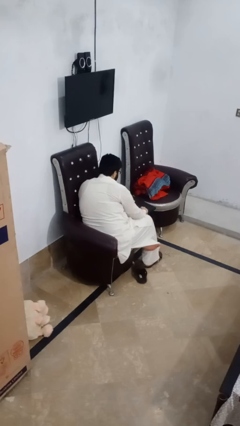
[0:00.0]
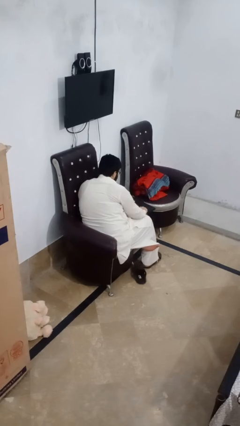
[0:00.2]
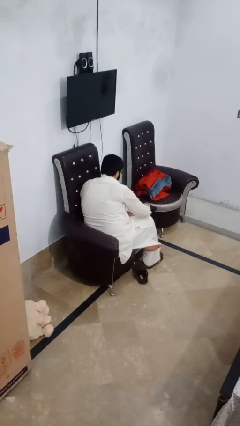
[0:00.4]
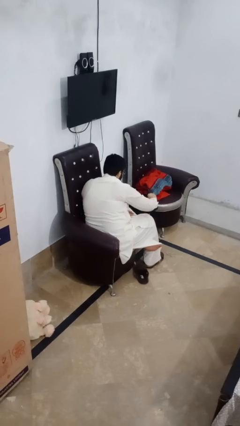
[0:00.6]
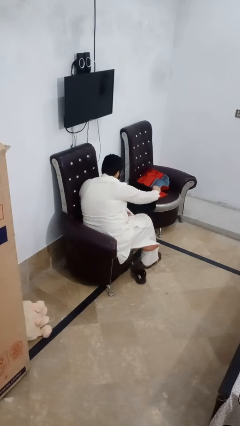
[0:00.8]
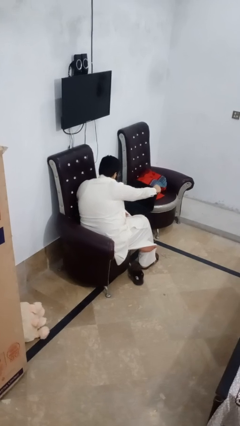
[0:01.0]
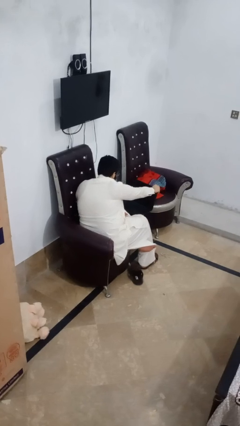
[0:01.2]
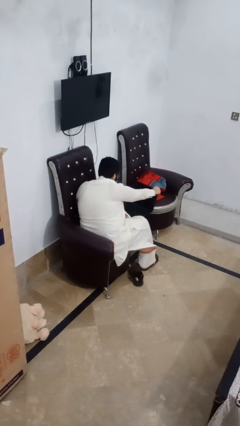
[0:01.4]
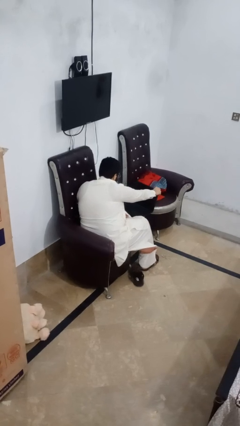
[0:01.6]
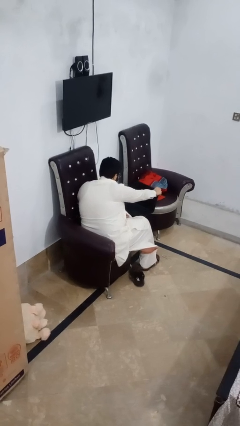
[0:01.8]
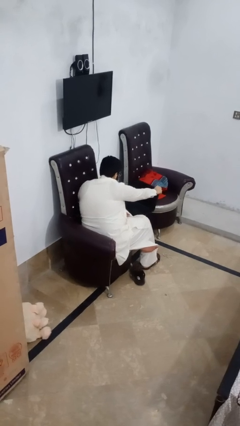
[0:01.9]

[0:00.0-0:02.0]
person opens laptop

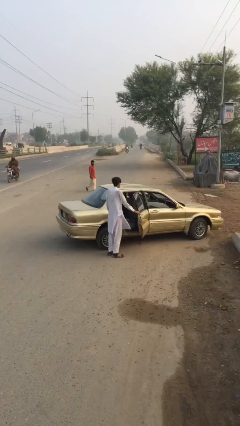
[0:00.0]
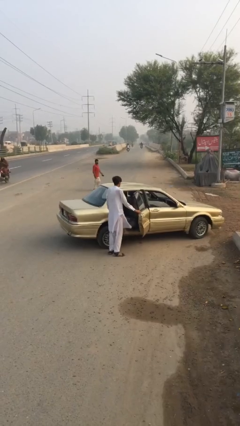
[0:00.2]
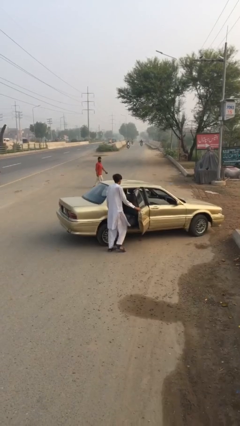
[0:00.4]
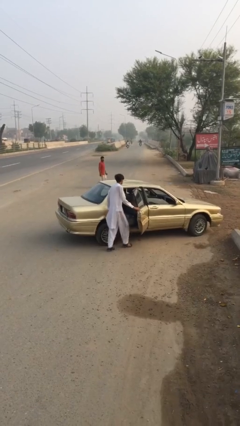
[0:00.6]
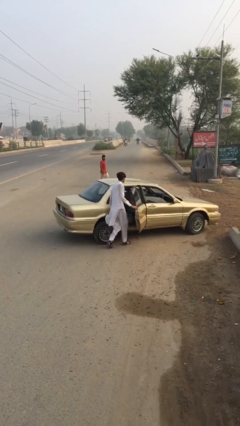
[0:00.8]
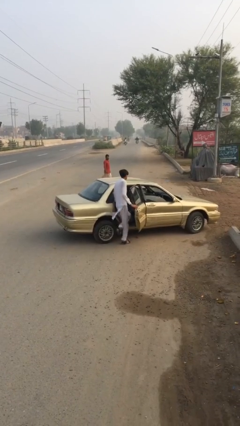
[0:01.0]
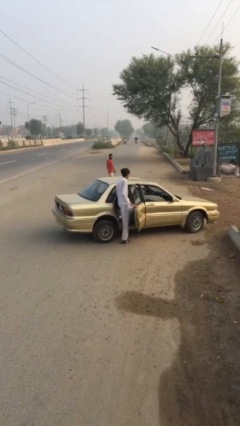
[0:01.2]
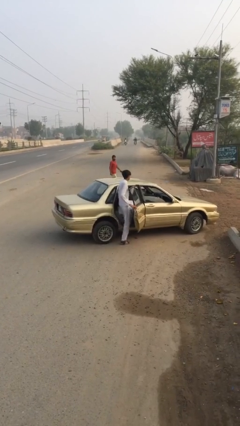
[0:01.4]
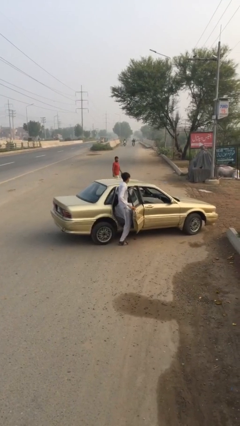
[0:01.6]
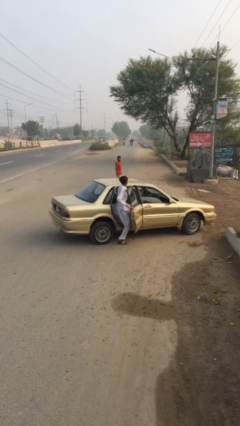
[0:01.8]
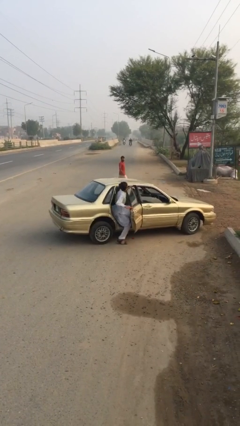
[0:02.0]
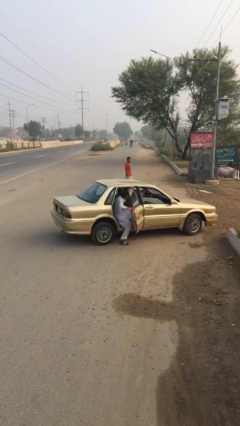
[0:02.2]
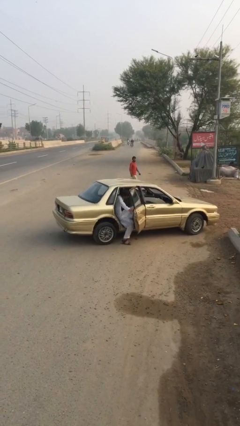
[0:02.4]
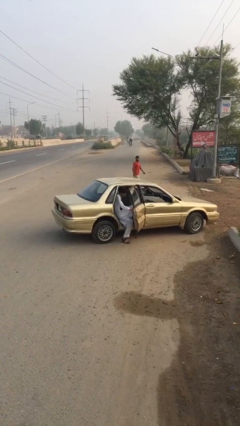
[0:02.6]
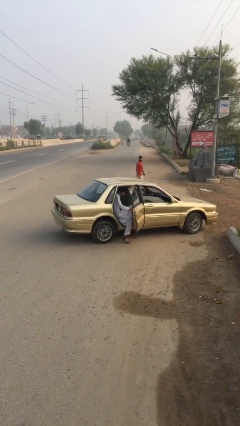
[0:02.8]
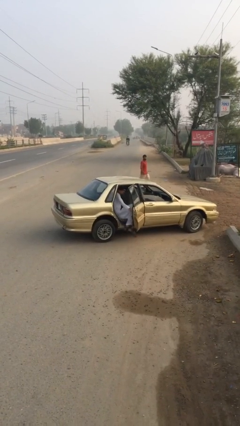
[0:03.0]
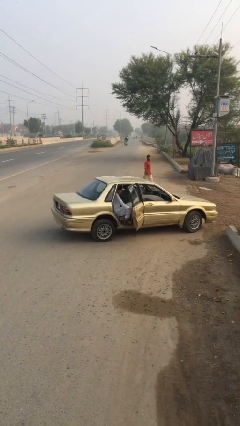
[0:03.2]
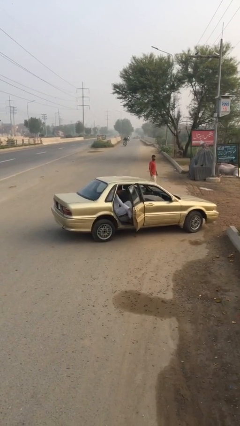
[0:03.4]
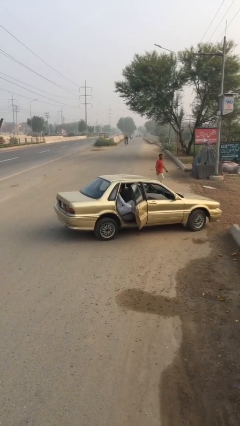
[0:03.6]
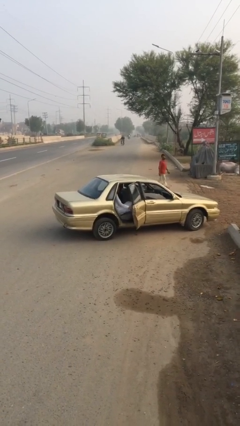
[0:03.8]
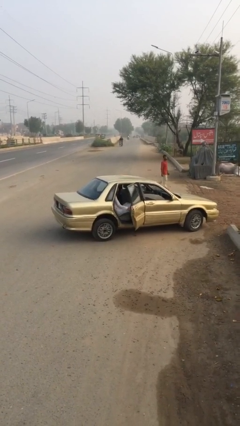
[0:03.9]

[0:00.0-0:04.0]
person enters car

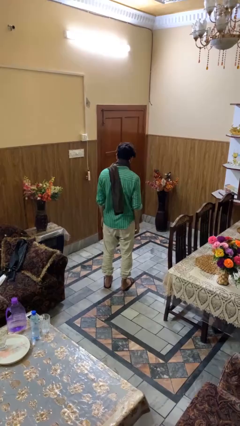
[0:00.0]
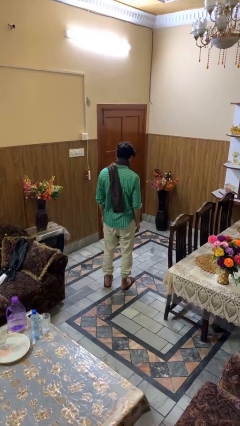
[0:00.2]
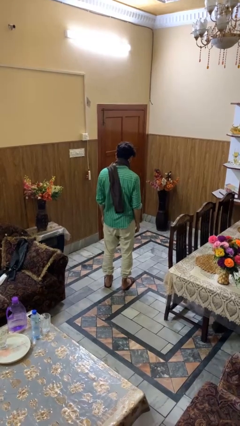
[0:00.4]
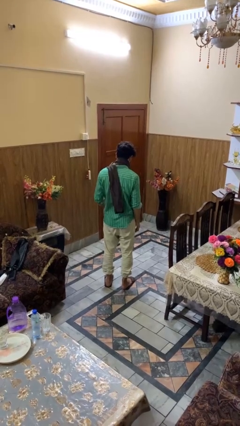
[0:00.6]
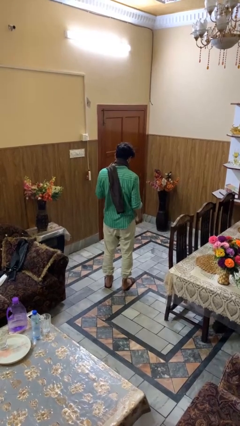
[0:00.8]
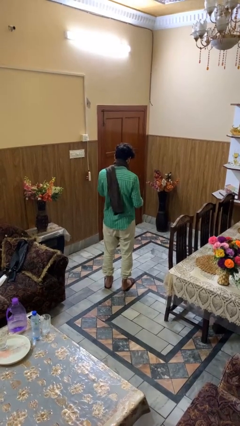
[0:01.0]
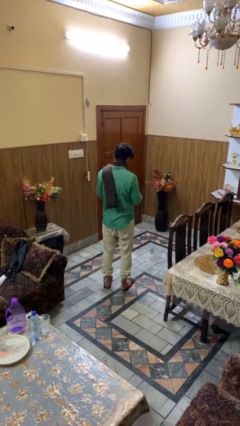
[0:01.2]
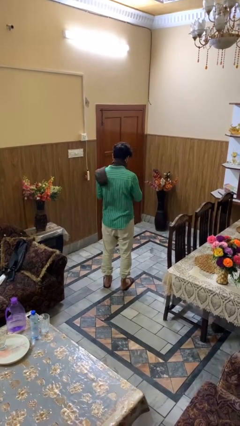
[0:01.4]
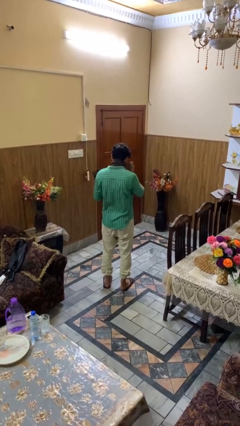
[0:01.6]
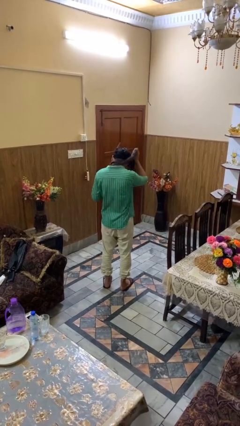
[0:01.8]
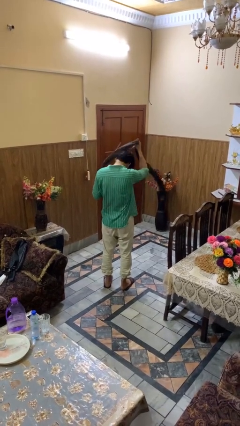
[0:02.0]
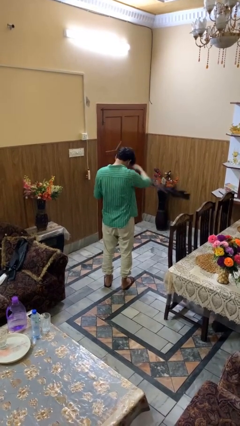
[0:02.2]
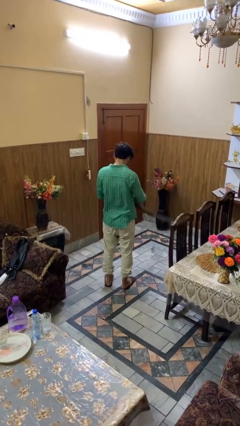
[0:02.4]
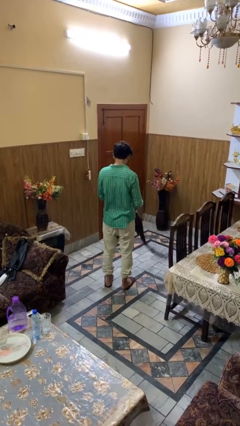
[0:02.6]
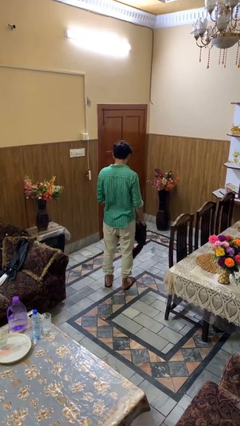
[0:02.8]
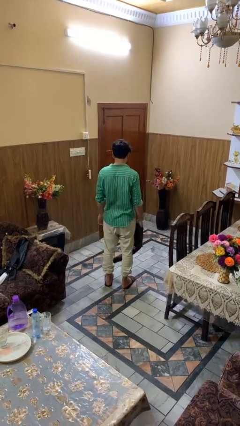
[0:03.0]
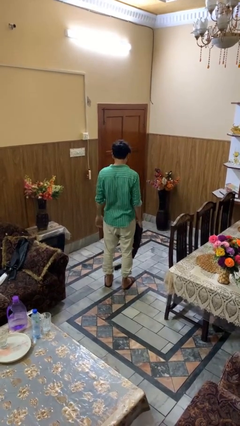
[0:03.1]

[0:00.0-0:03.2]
person takes off scarf

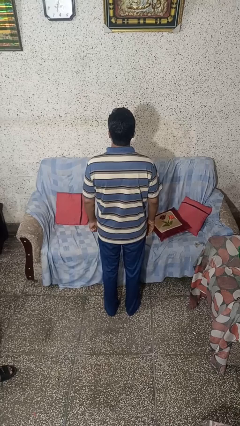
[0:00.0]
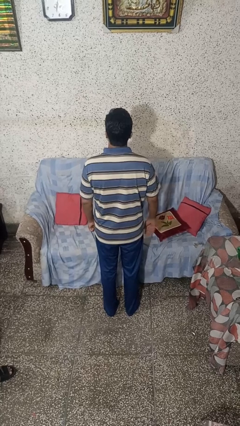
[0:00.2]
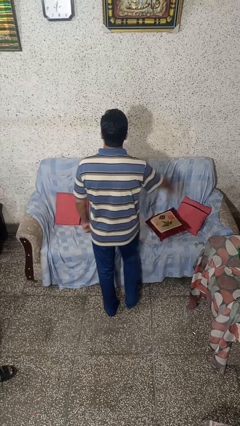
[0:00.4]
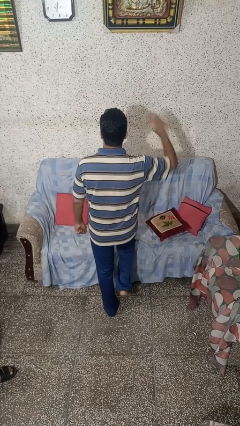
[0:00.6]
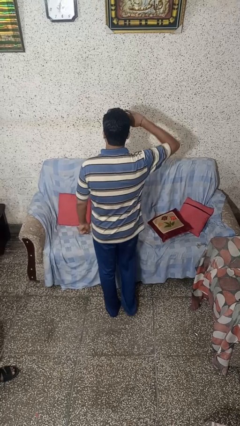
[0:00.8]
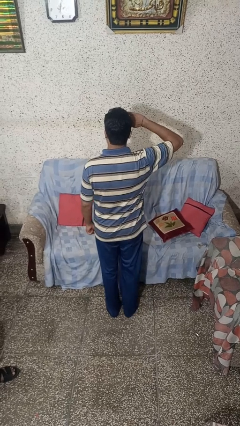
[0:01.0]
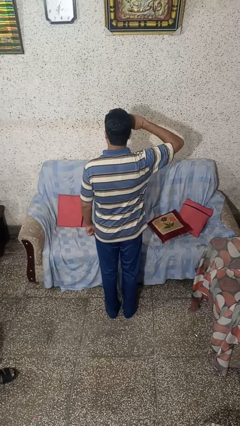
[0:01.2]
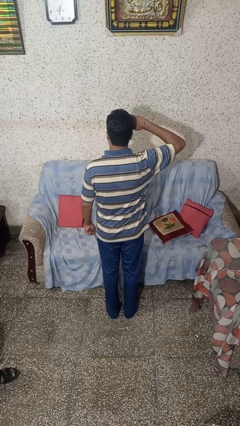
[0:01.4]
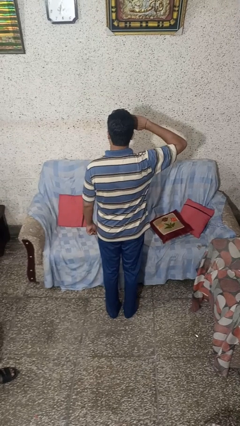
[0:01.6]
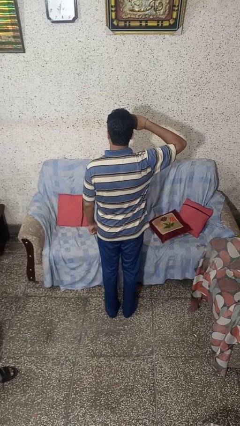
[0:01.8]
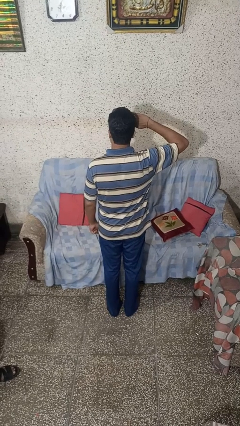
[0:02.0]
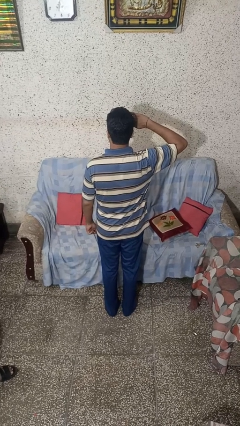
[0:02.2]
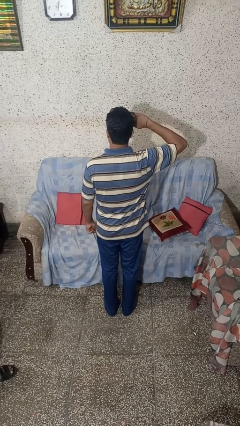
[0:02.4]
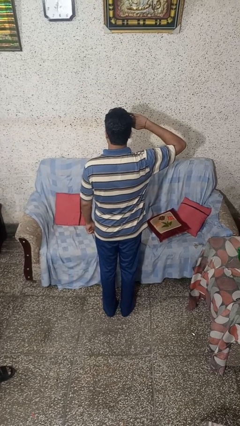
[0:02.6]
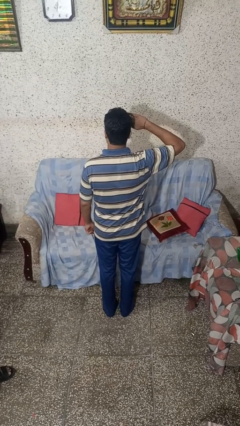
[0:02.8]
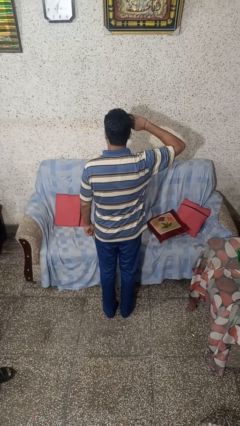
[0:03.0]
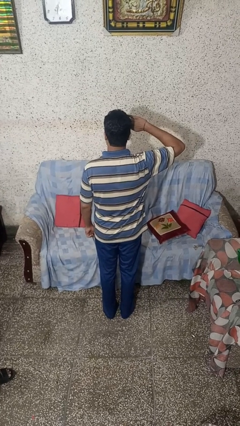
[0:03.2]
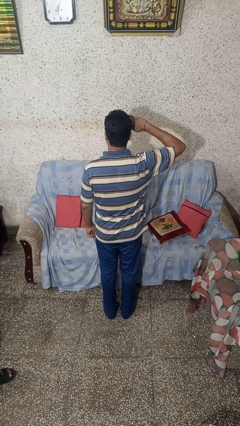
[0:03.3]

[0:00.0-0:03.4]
person salutes

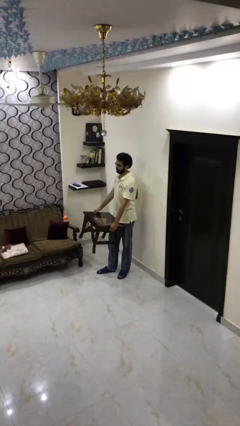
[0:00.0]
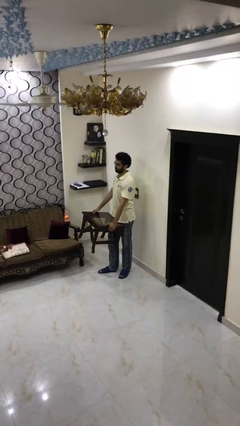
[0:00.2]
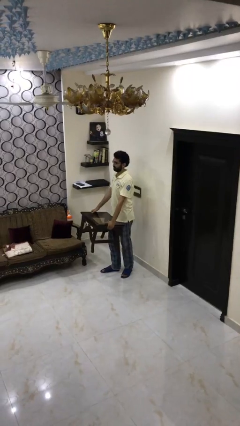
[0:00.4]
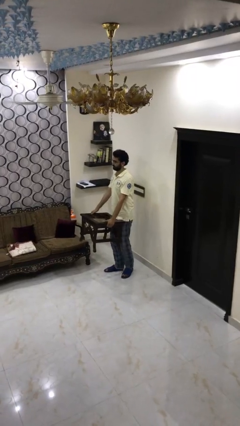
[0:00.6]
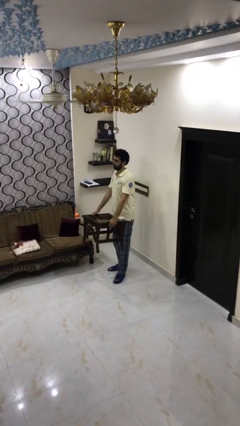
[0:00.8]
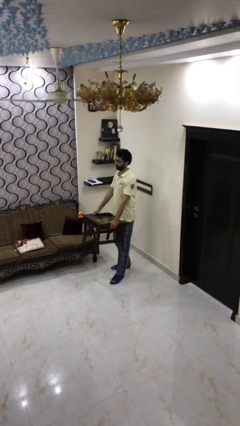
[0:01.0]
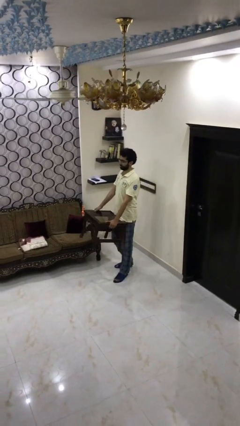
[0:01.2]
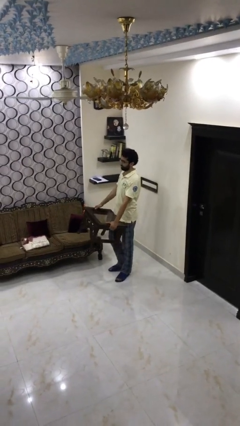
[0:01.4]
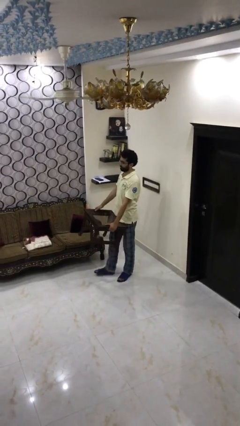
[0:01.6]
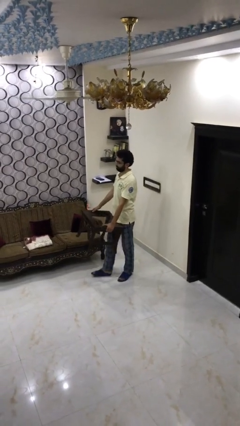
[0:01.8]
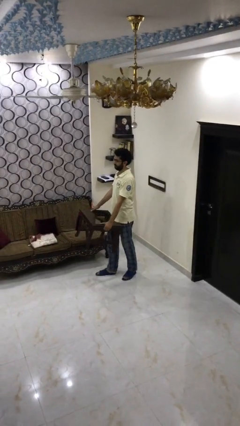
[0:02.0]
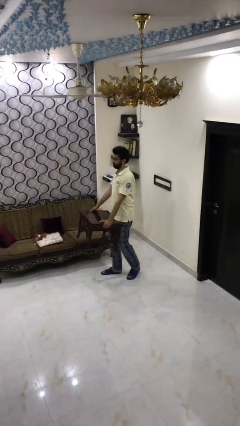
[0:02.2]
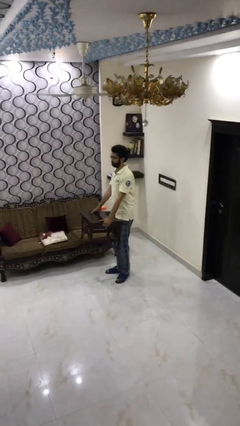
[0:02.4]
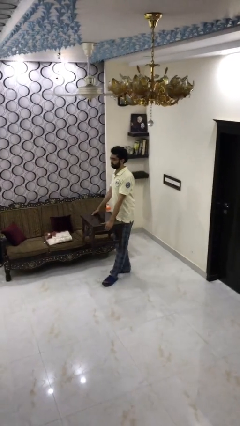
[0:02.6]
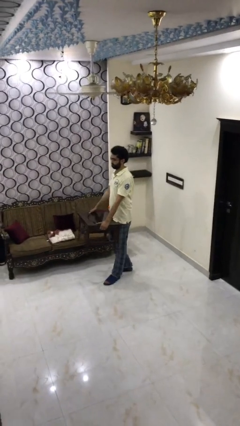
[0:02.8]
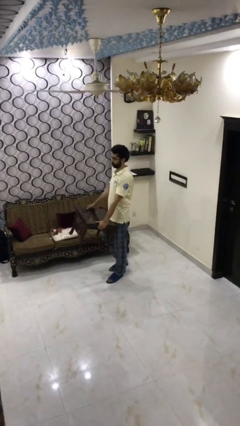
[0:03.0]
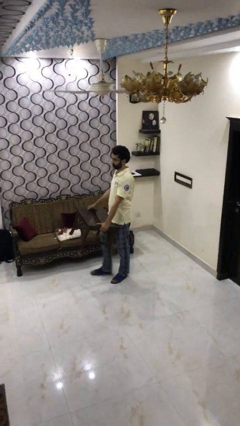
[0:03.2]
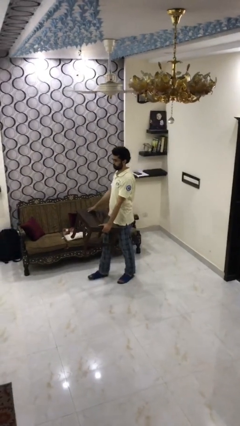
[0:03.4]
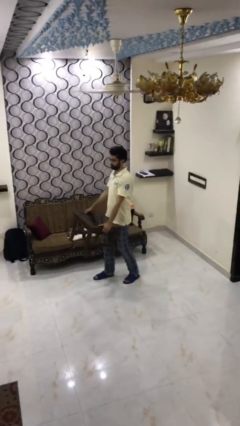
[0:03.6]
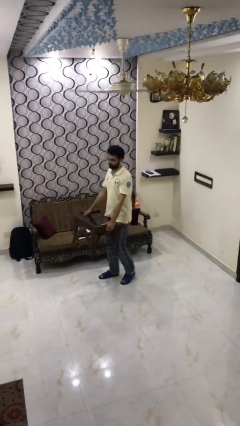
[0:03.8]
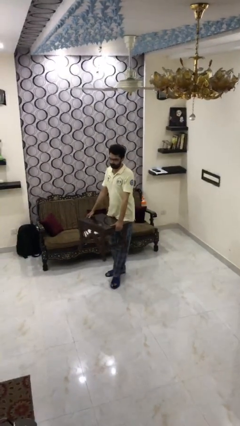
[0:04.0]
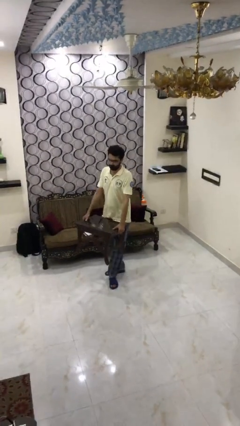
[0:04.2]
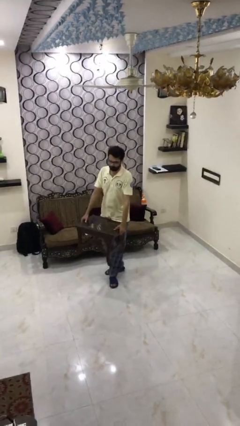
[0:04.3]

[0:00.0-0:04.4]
person carries heavy object

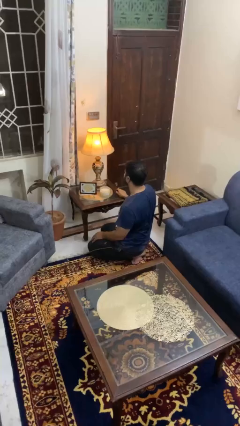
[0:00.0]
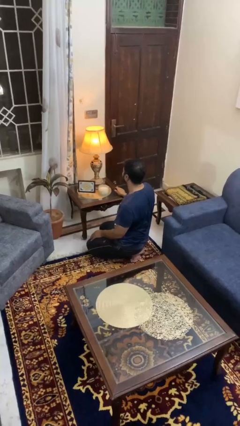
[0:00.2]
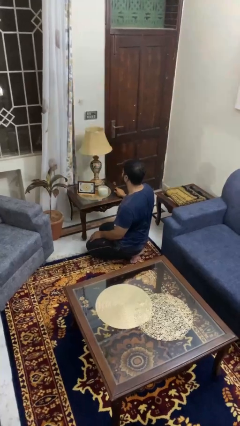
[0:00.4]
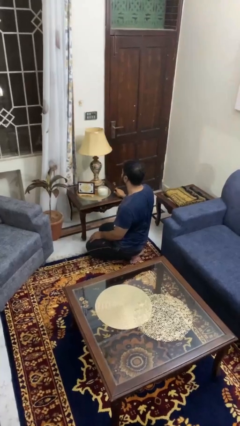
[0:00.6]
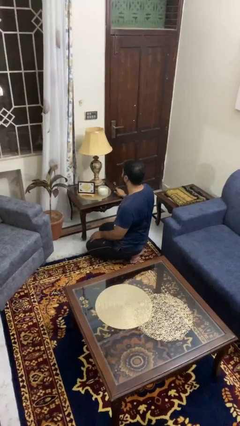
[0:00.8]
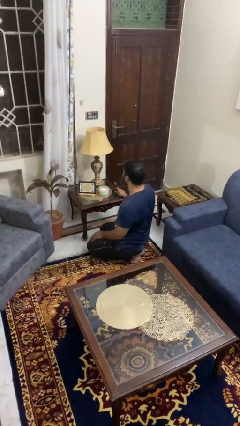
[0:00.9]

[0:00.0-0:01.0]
person turns off lamp
